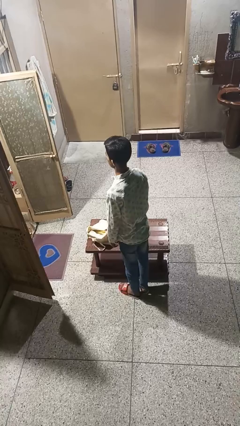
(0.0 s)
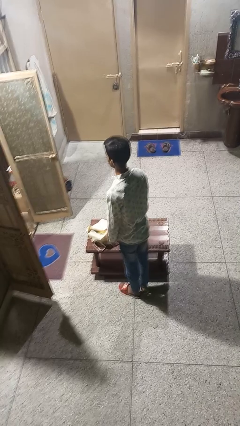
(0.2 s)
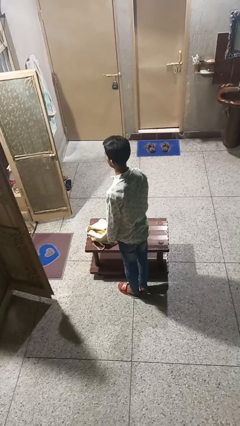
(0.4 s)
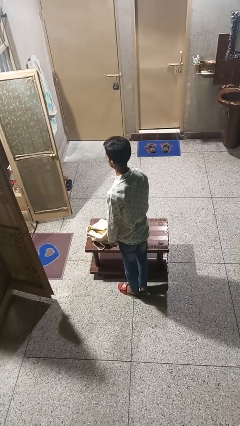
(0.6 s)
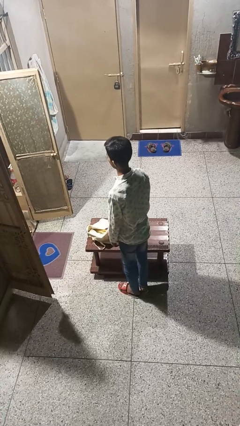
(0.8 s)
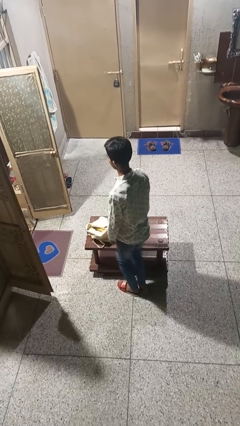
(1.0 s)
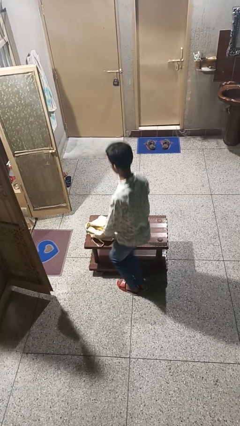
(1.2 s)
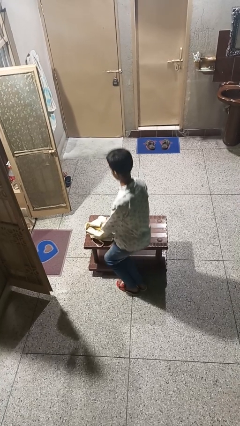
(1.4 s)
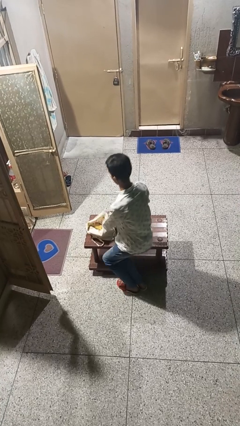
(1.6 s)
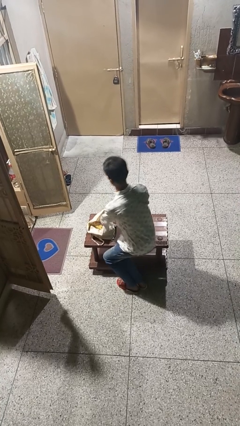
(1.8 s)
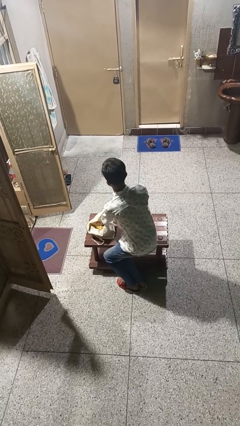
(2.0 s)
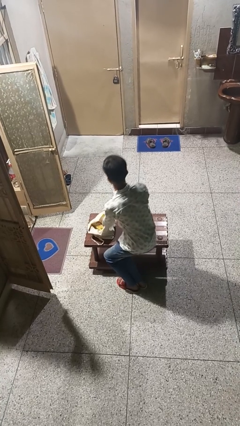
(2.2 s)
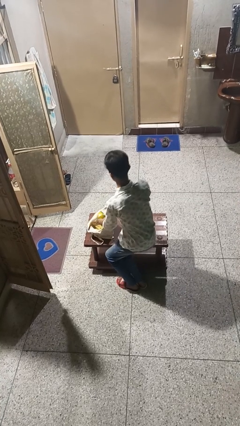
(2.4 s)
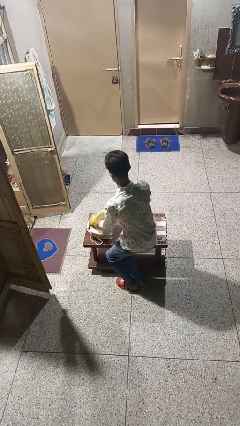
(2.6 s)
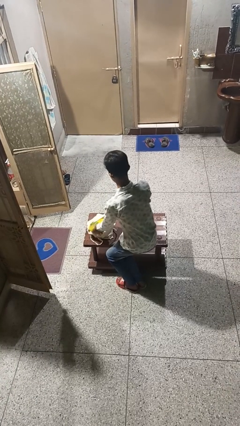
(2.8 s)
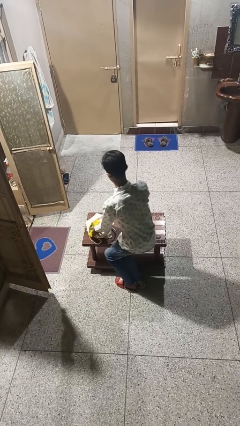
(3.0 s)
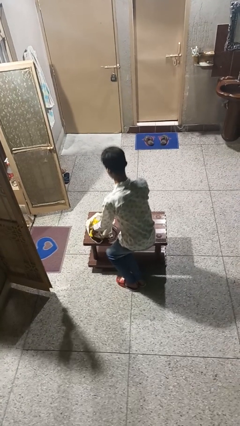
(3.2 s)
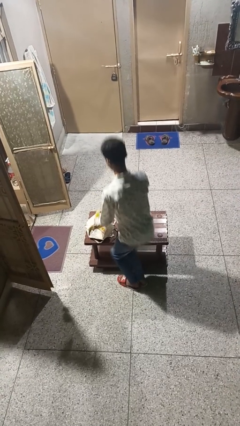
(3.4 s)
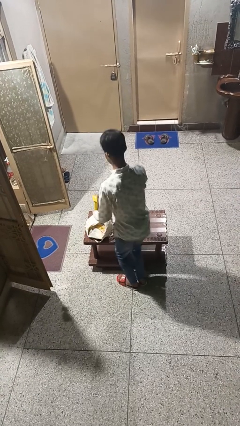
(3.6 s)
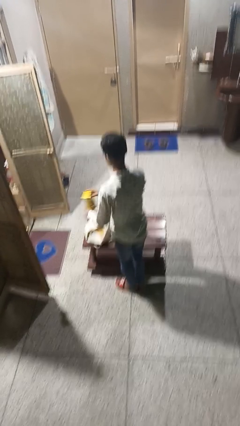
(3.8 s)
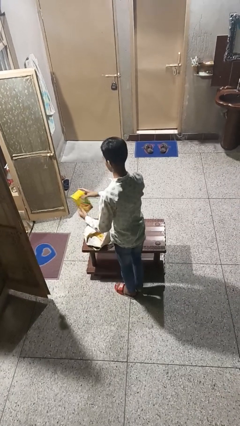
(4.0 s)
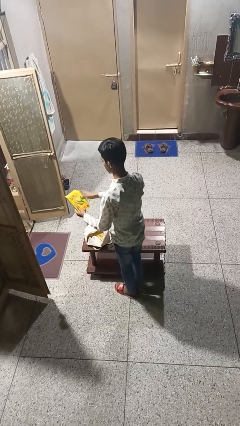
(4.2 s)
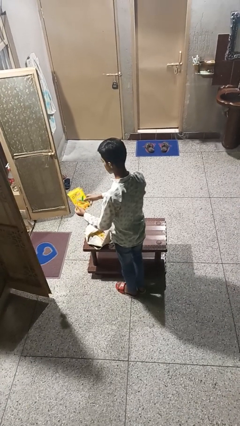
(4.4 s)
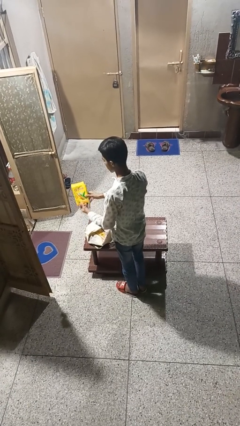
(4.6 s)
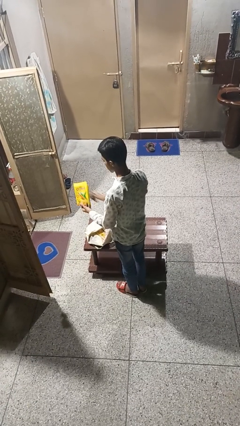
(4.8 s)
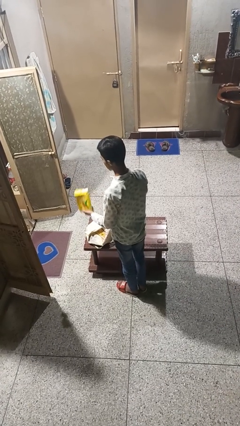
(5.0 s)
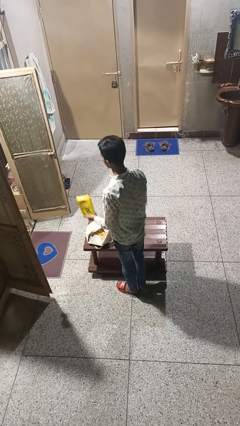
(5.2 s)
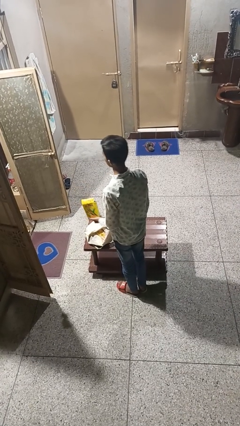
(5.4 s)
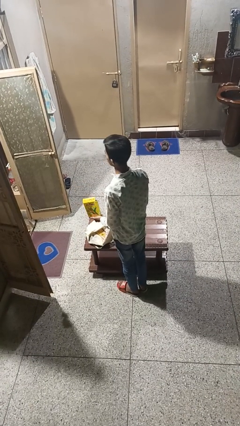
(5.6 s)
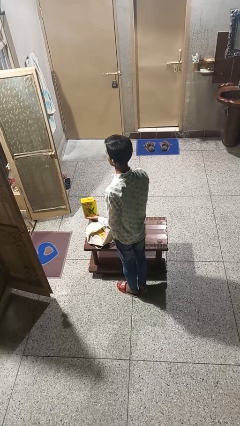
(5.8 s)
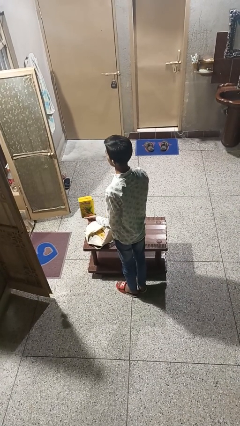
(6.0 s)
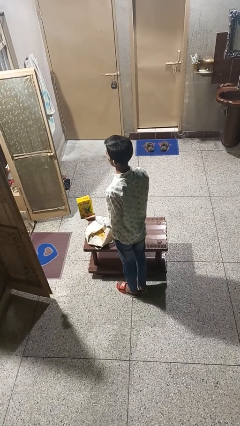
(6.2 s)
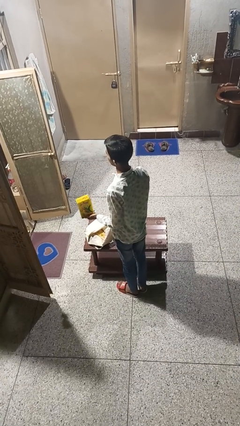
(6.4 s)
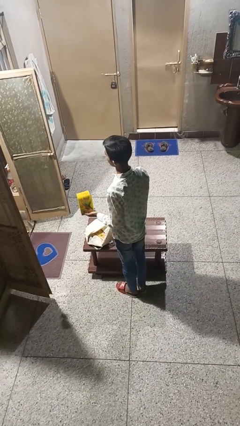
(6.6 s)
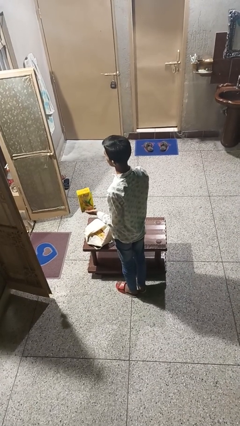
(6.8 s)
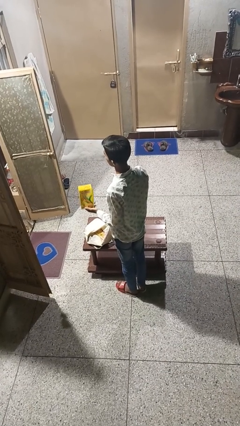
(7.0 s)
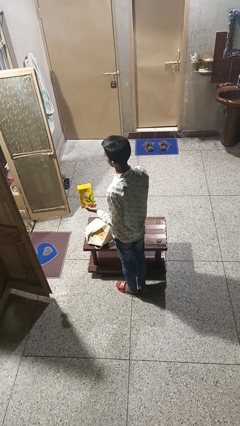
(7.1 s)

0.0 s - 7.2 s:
person takes object from bag

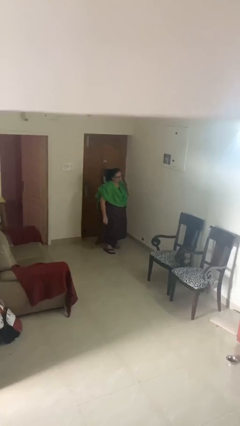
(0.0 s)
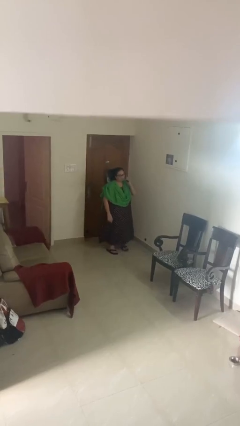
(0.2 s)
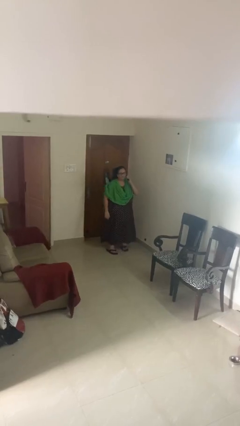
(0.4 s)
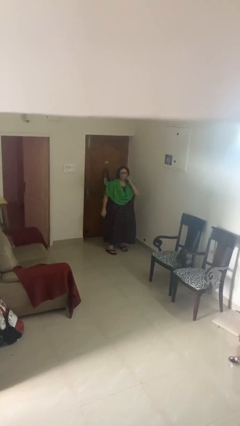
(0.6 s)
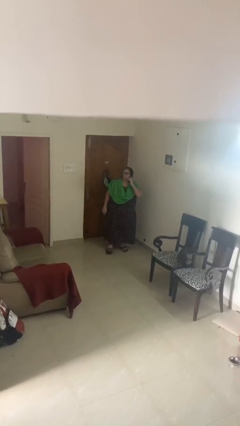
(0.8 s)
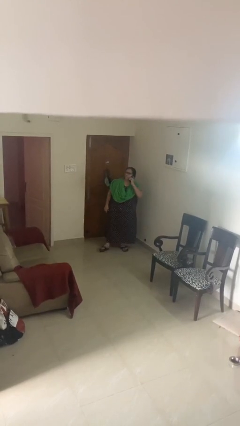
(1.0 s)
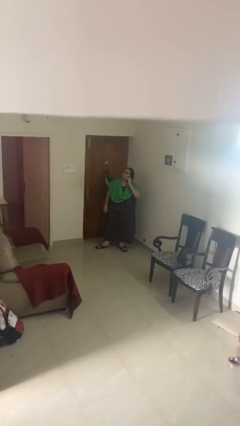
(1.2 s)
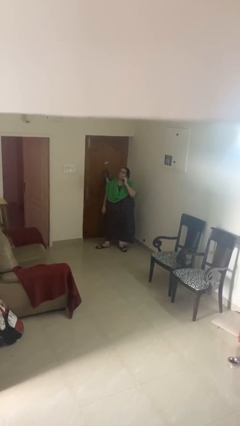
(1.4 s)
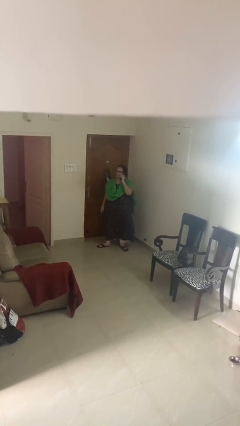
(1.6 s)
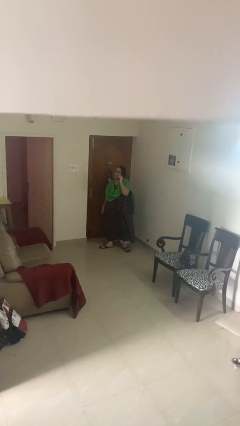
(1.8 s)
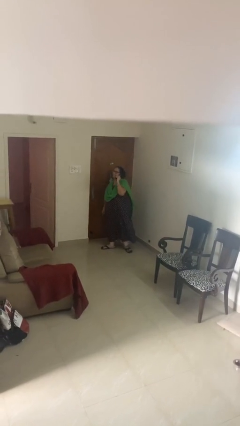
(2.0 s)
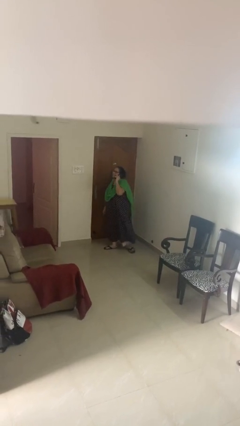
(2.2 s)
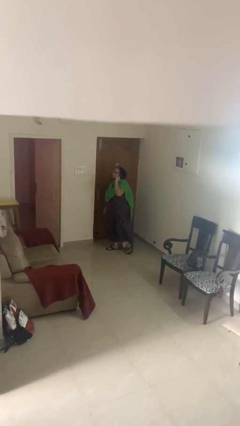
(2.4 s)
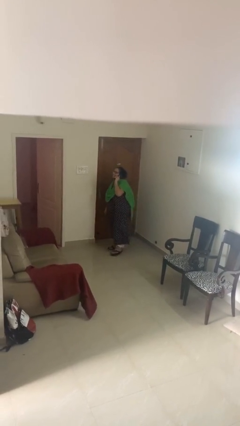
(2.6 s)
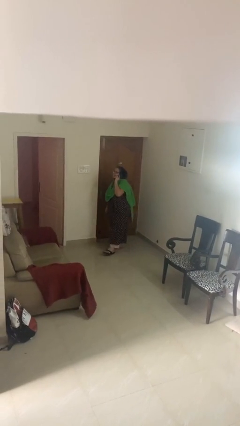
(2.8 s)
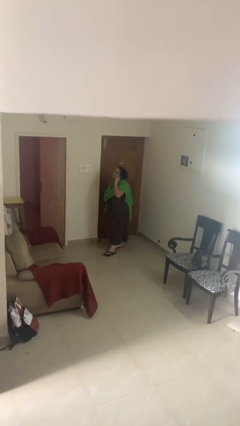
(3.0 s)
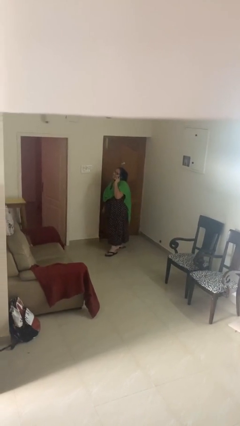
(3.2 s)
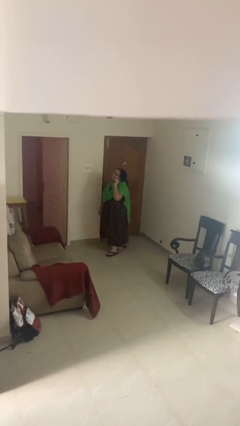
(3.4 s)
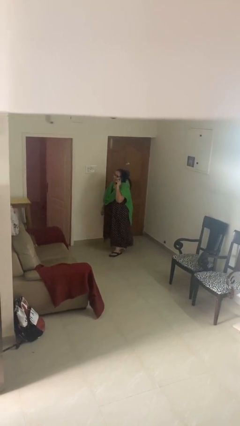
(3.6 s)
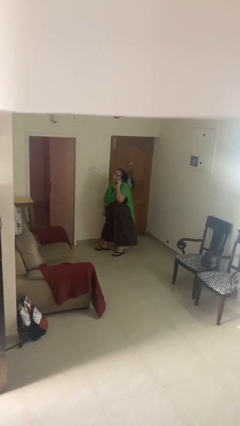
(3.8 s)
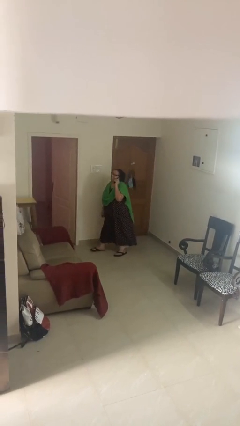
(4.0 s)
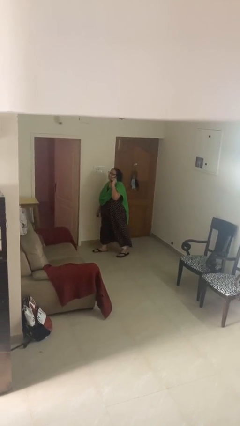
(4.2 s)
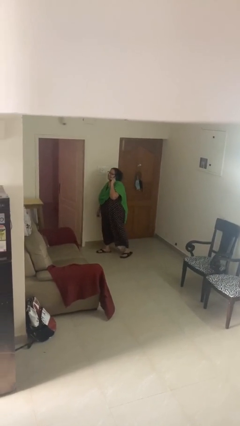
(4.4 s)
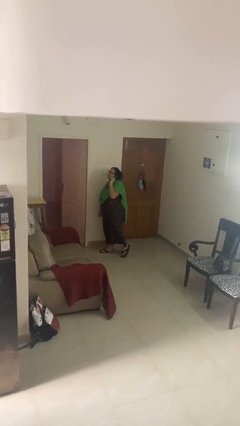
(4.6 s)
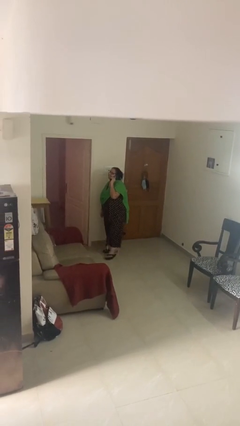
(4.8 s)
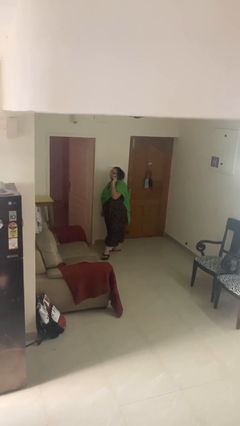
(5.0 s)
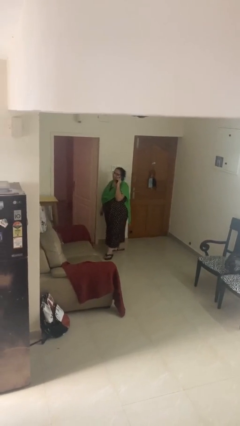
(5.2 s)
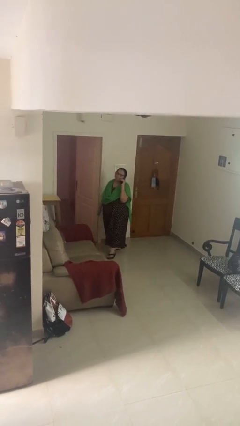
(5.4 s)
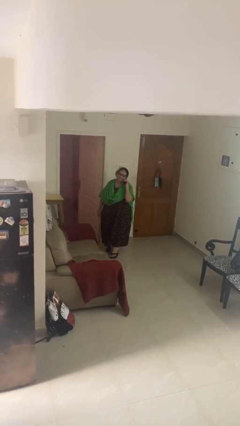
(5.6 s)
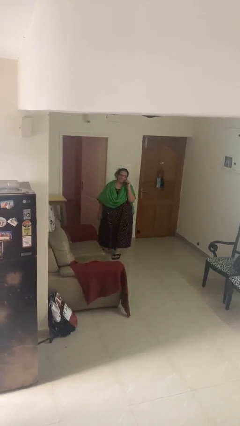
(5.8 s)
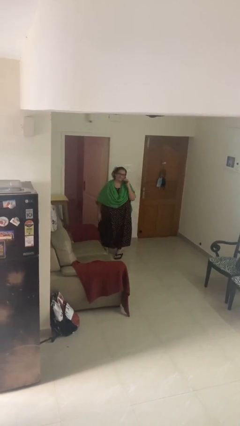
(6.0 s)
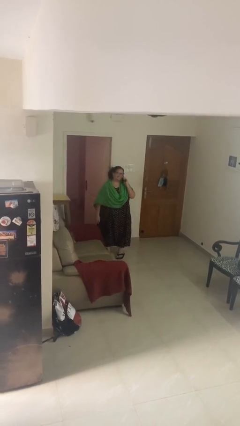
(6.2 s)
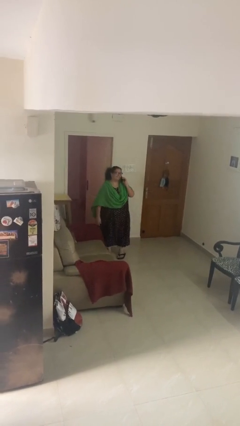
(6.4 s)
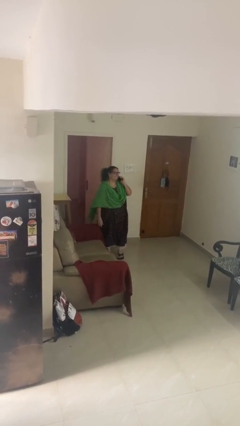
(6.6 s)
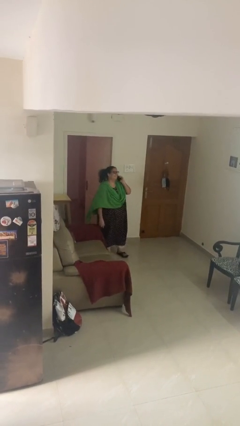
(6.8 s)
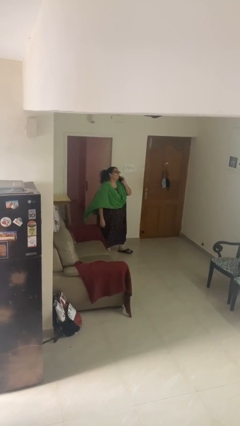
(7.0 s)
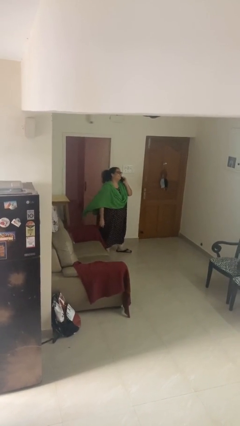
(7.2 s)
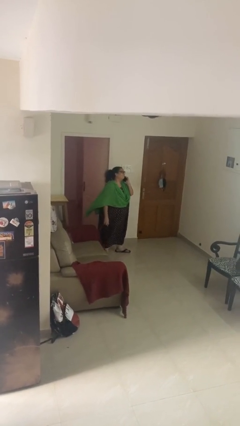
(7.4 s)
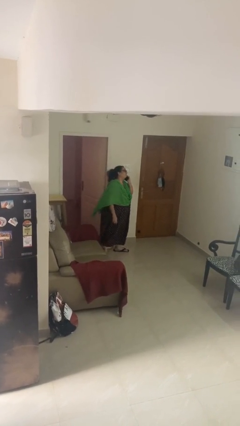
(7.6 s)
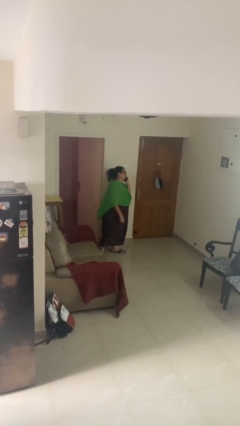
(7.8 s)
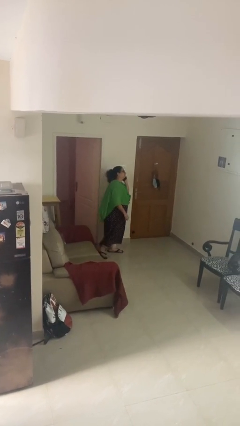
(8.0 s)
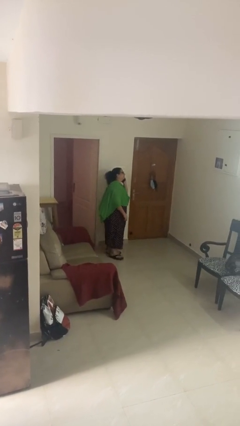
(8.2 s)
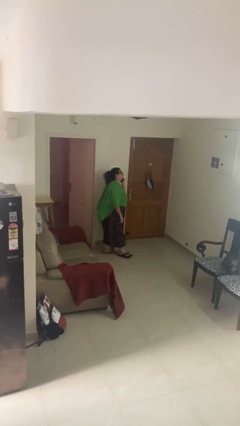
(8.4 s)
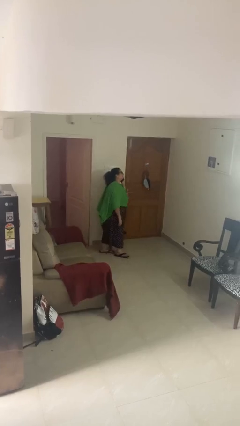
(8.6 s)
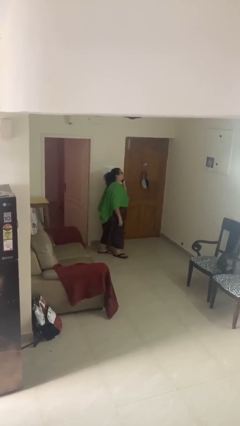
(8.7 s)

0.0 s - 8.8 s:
person talks on phone

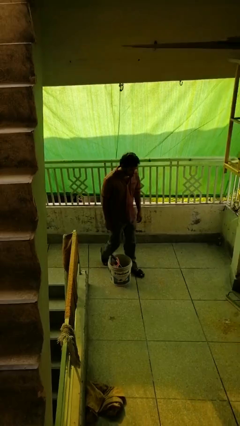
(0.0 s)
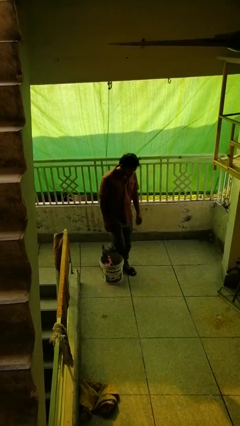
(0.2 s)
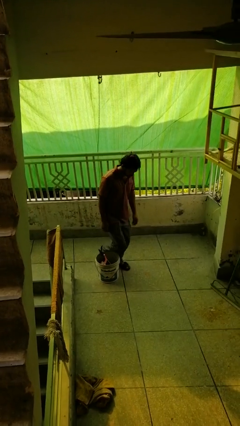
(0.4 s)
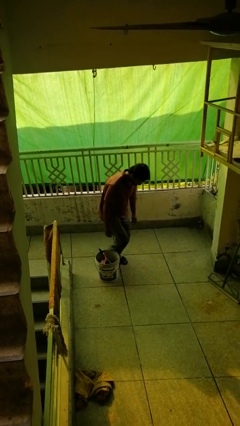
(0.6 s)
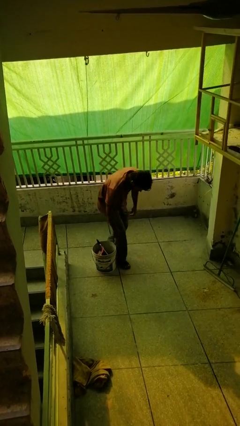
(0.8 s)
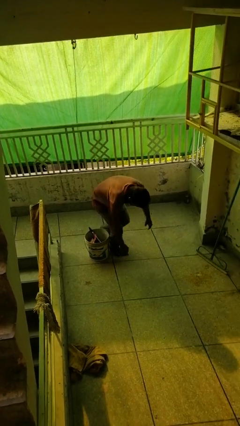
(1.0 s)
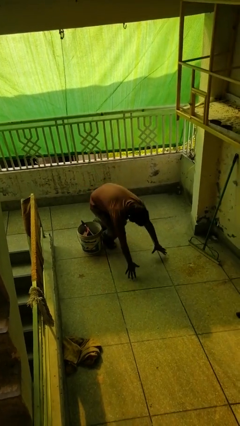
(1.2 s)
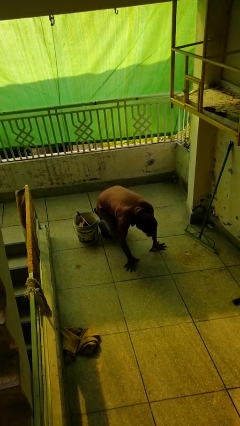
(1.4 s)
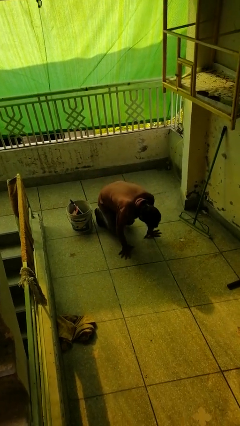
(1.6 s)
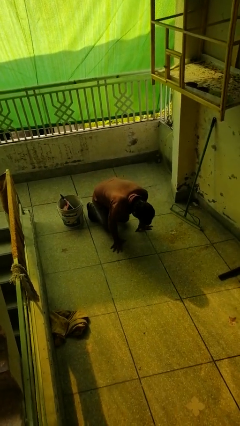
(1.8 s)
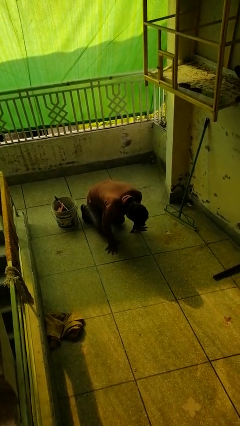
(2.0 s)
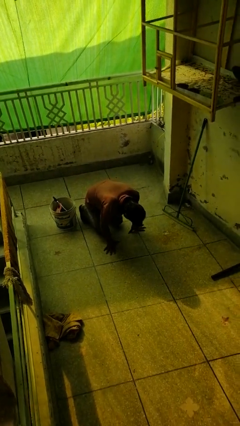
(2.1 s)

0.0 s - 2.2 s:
person trips on object on floor
